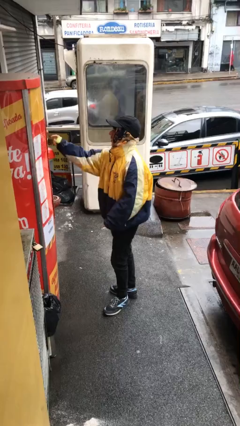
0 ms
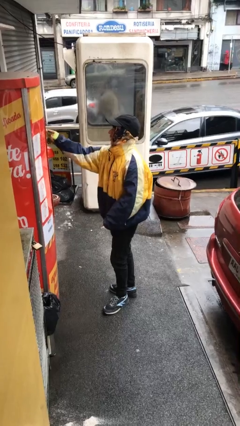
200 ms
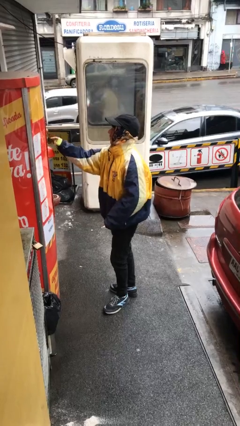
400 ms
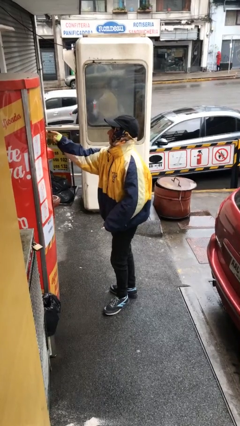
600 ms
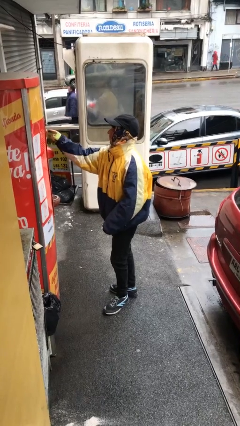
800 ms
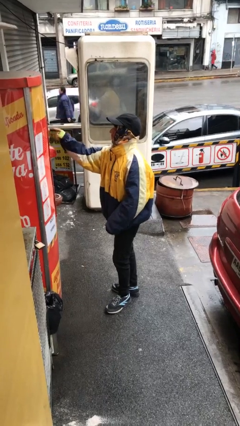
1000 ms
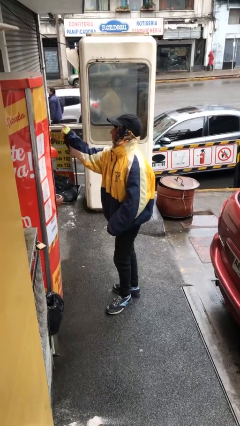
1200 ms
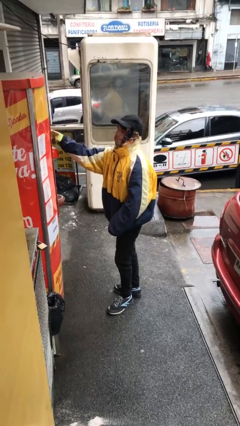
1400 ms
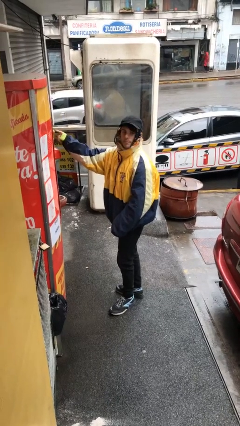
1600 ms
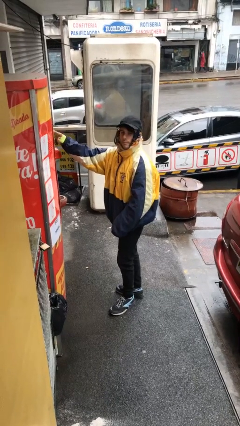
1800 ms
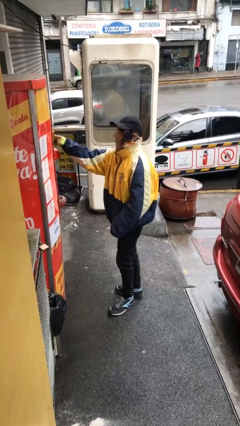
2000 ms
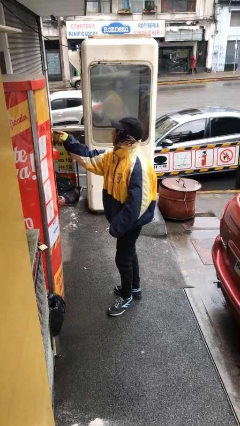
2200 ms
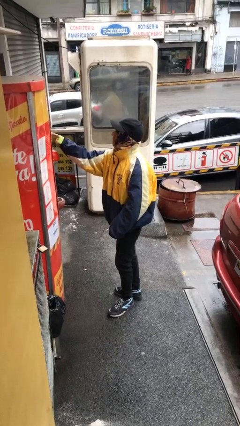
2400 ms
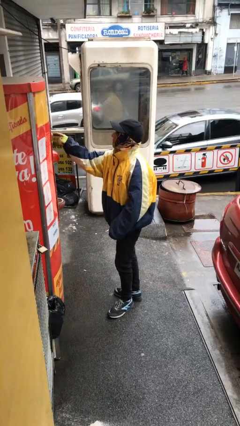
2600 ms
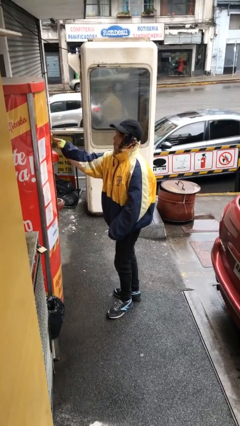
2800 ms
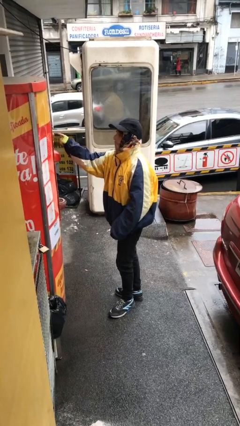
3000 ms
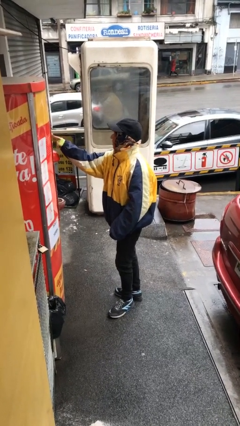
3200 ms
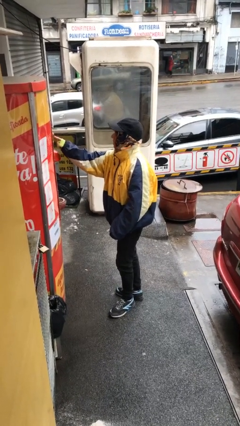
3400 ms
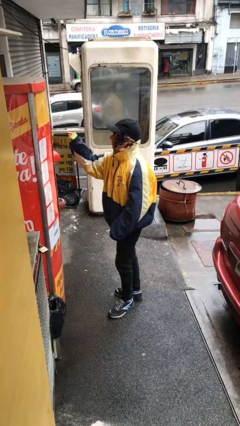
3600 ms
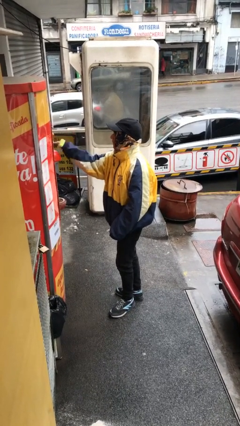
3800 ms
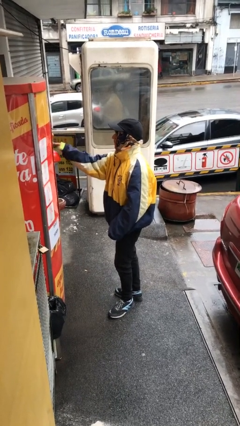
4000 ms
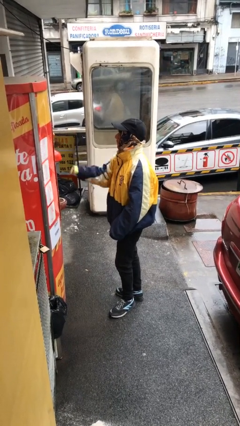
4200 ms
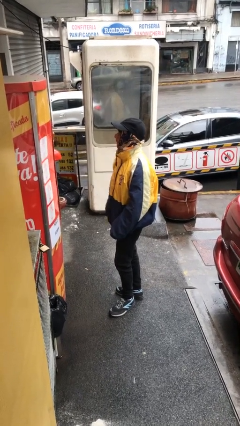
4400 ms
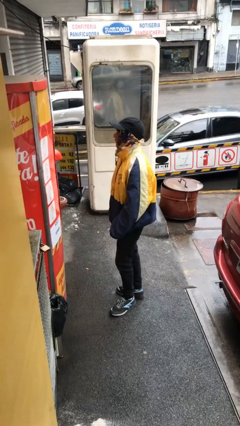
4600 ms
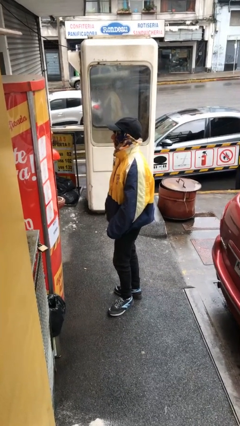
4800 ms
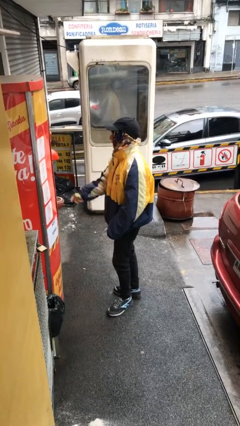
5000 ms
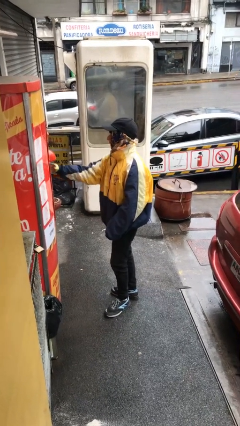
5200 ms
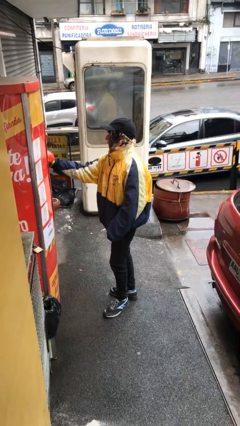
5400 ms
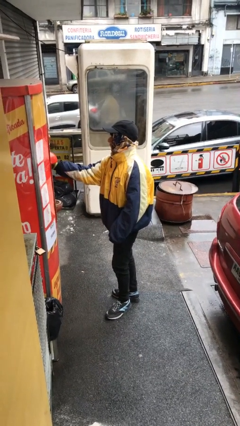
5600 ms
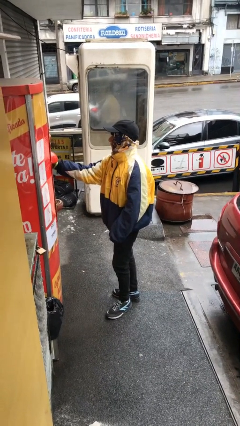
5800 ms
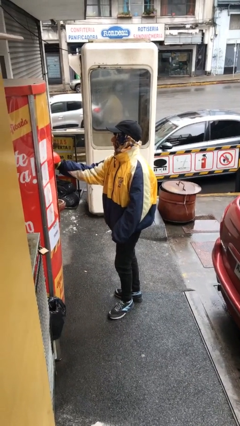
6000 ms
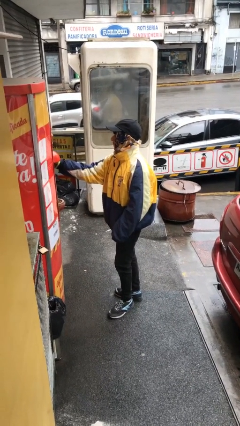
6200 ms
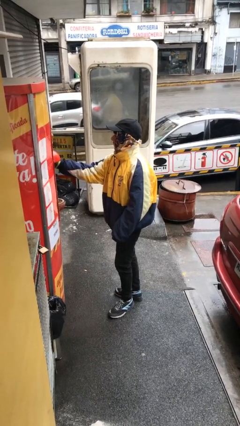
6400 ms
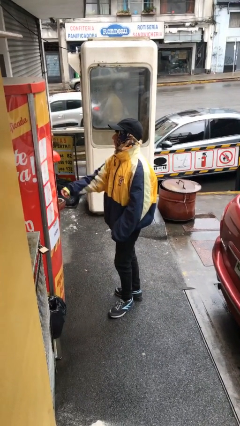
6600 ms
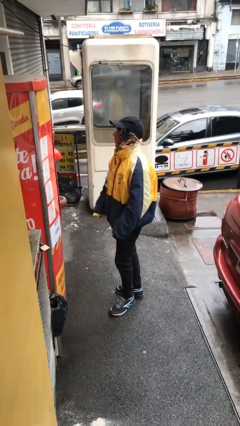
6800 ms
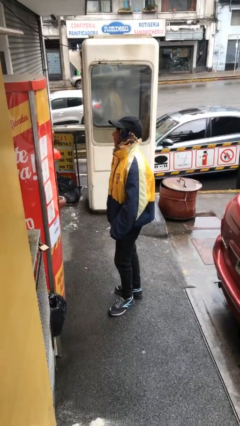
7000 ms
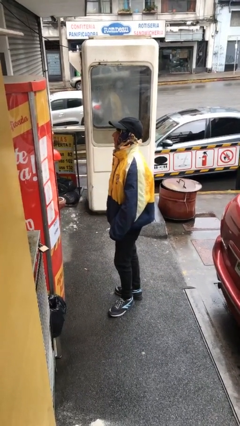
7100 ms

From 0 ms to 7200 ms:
person purchases from machine

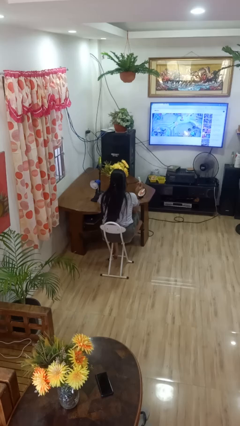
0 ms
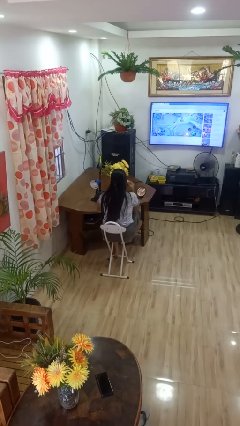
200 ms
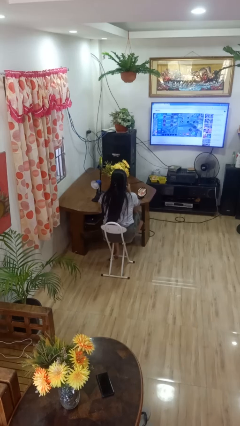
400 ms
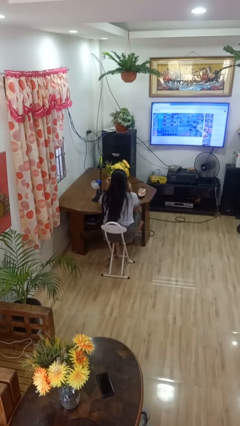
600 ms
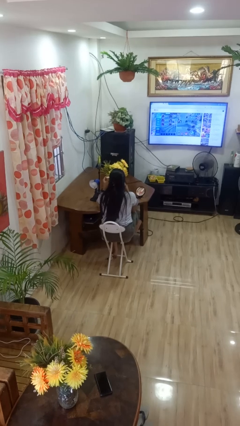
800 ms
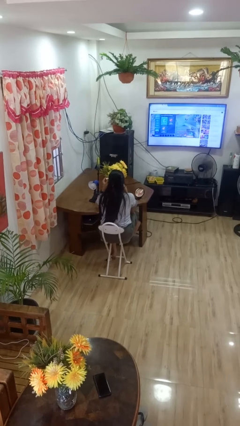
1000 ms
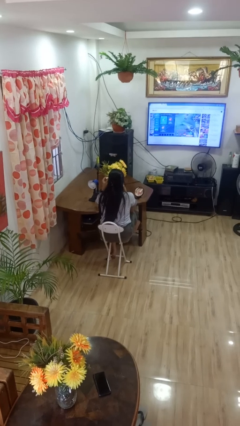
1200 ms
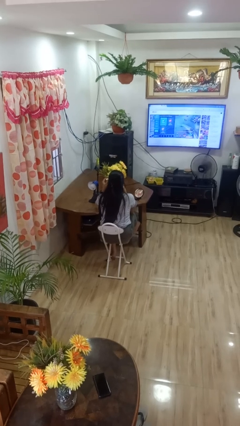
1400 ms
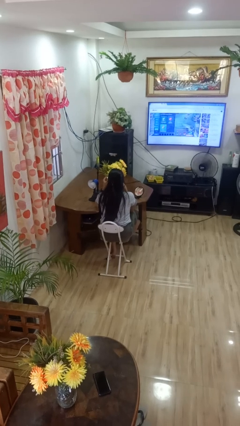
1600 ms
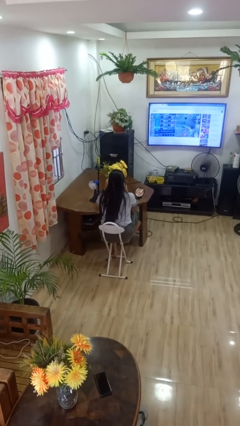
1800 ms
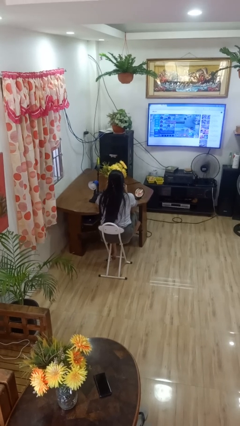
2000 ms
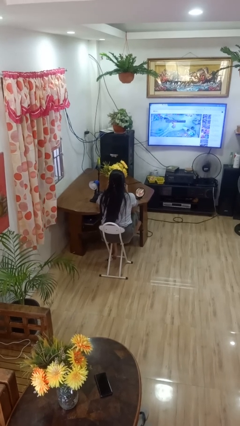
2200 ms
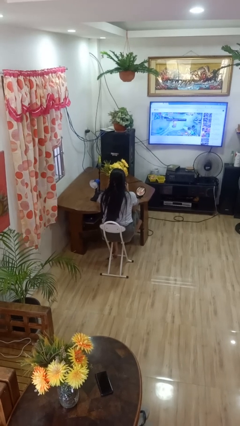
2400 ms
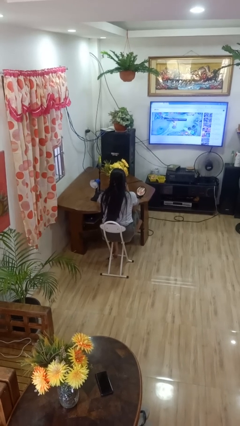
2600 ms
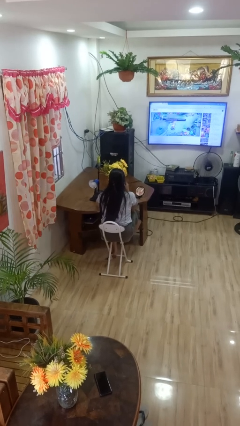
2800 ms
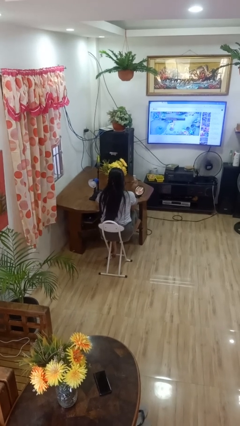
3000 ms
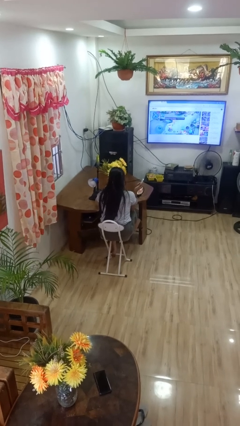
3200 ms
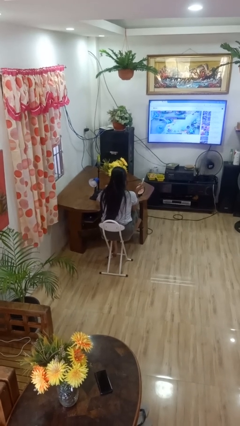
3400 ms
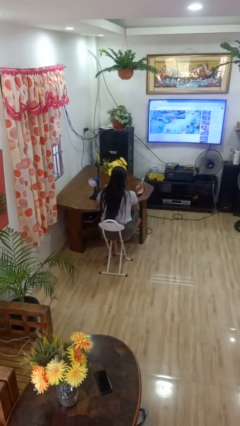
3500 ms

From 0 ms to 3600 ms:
person applies lip makeup

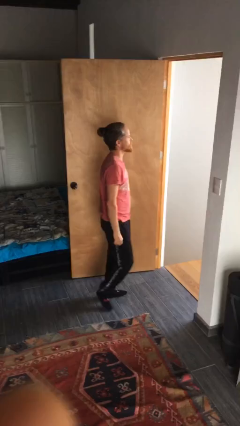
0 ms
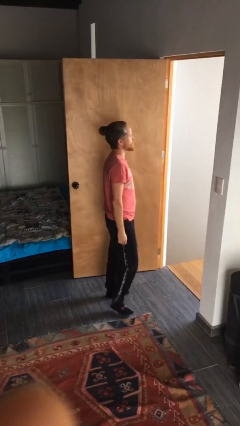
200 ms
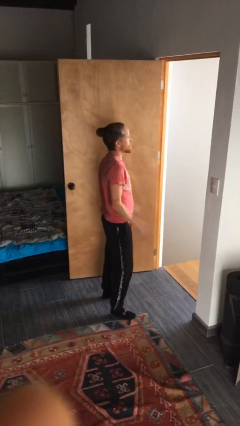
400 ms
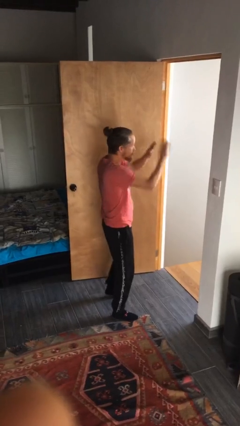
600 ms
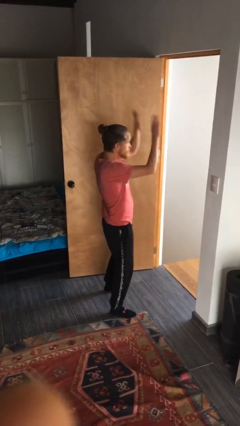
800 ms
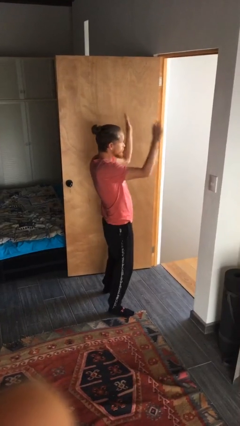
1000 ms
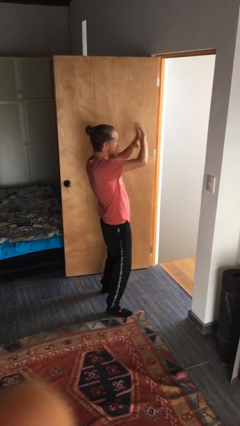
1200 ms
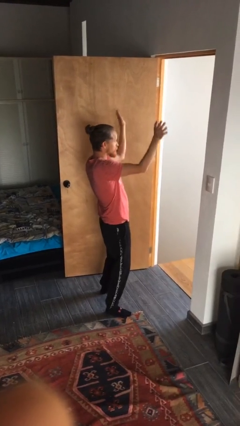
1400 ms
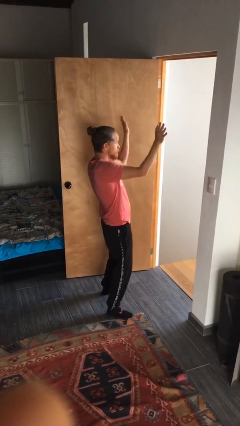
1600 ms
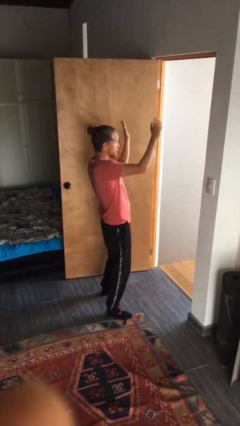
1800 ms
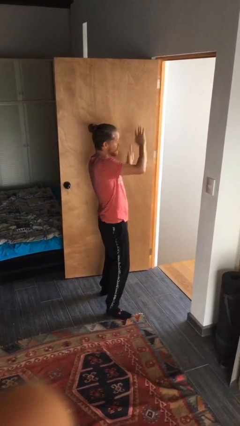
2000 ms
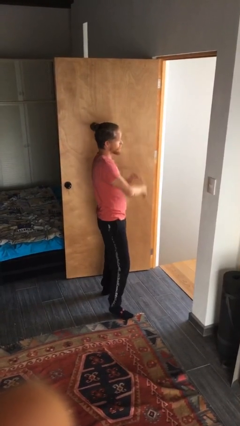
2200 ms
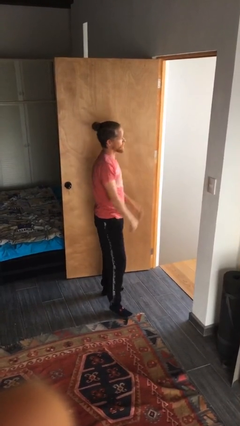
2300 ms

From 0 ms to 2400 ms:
person waves at person

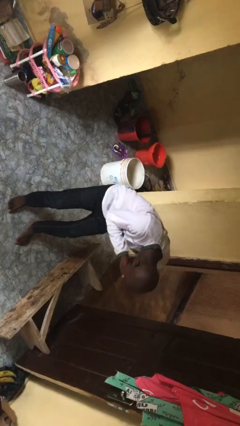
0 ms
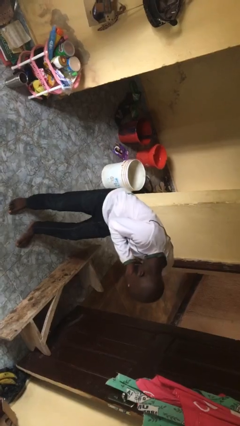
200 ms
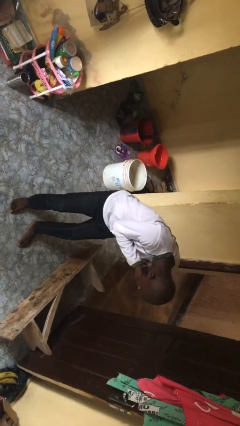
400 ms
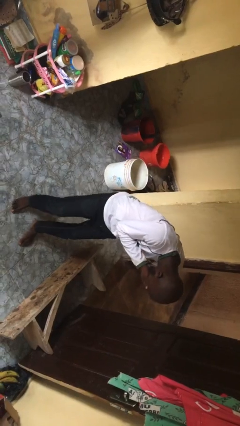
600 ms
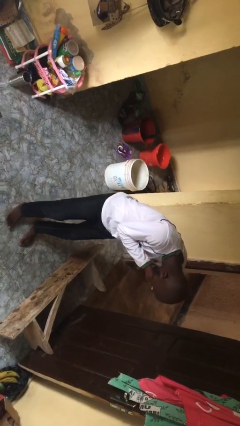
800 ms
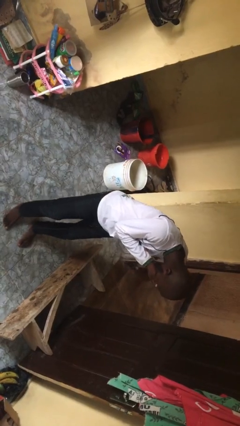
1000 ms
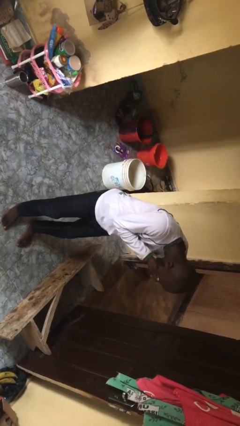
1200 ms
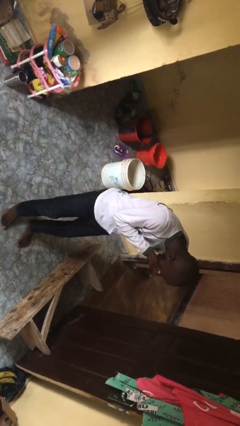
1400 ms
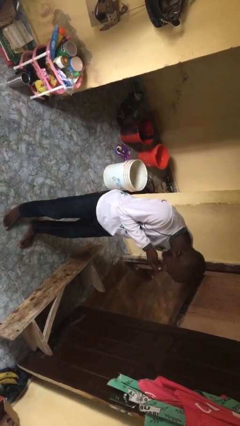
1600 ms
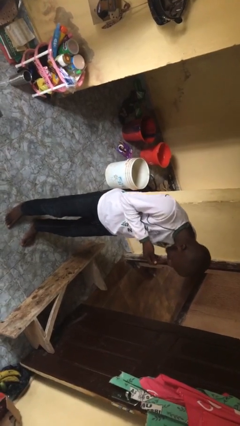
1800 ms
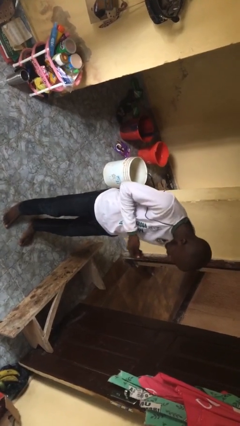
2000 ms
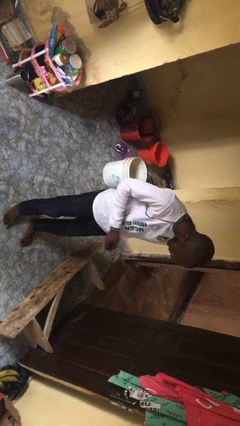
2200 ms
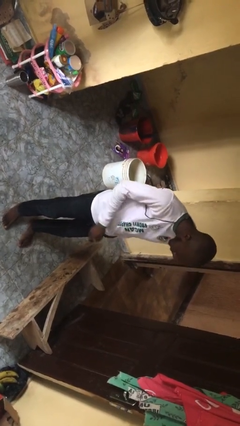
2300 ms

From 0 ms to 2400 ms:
person sneezes into hand

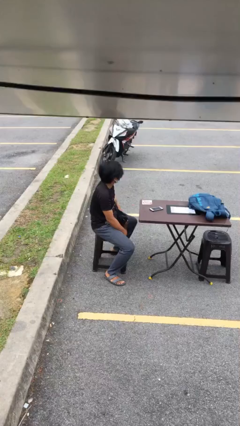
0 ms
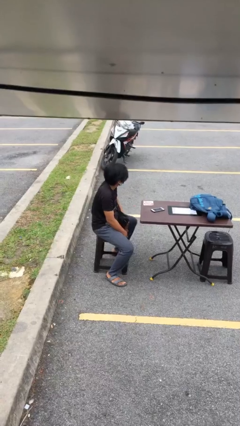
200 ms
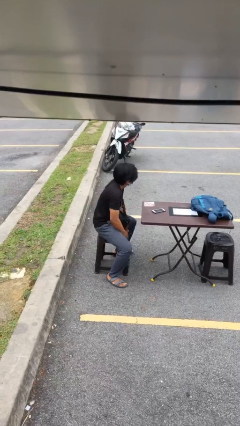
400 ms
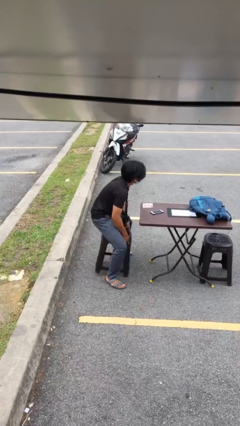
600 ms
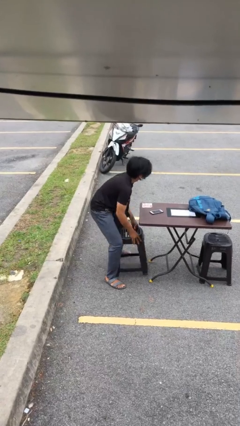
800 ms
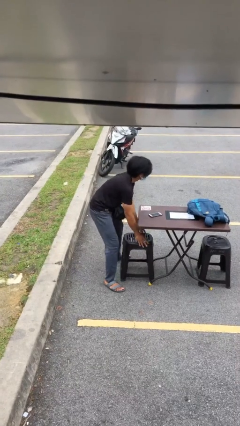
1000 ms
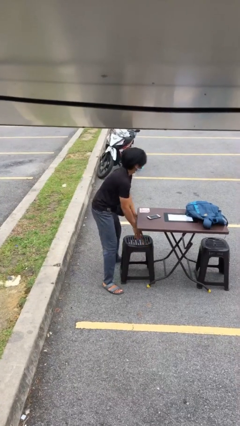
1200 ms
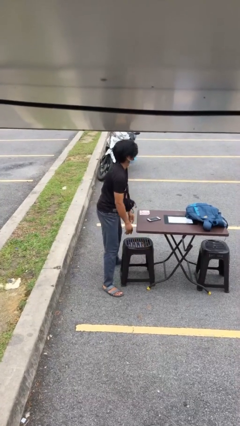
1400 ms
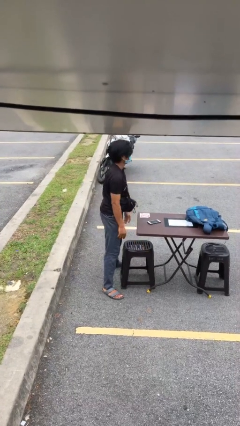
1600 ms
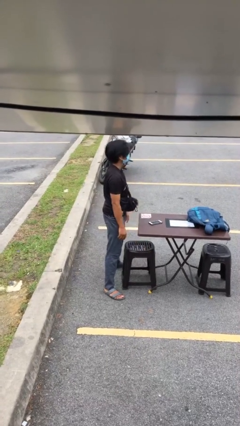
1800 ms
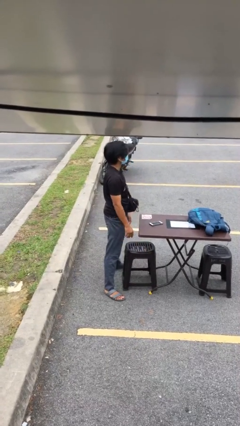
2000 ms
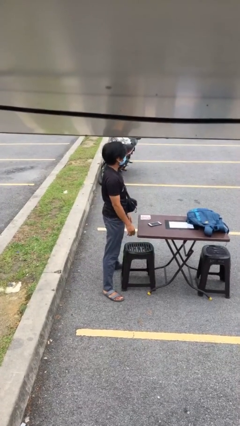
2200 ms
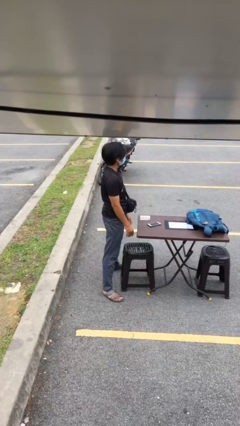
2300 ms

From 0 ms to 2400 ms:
person stands up
